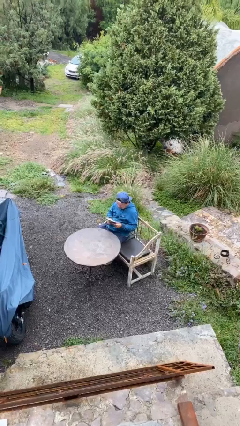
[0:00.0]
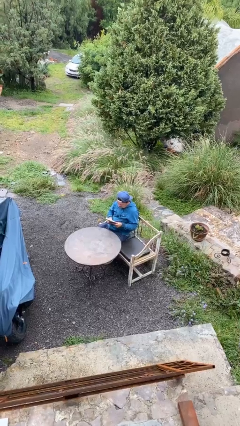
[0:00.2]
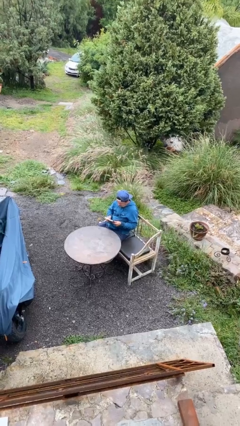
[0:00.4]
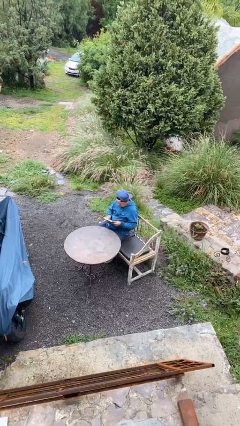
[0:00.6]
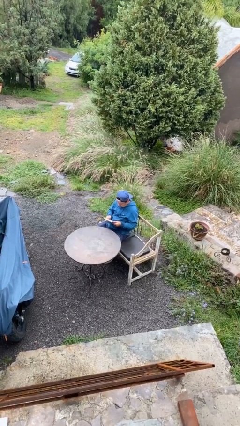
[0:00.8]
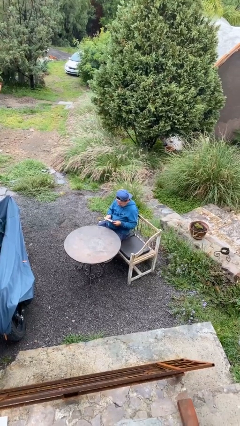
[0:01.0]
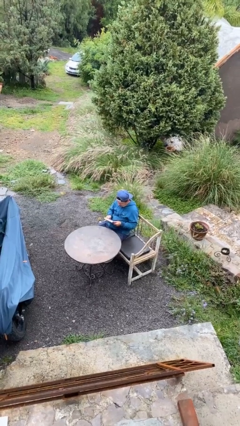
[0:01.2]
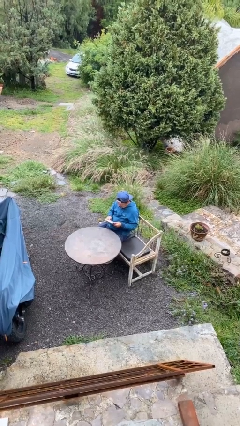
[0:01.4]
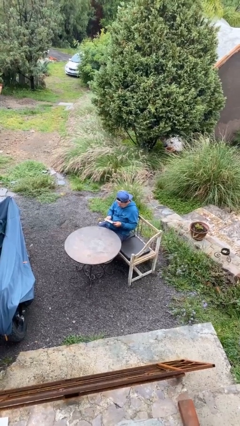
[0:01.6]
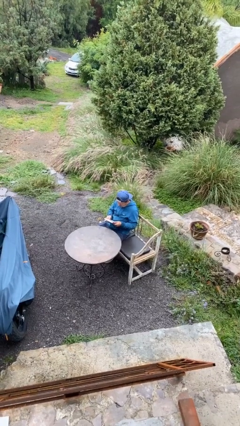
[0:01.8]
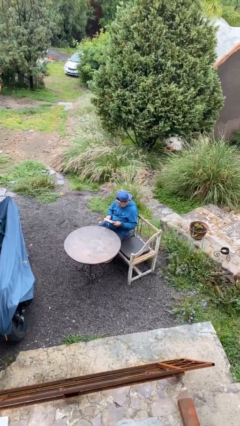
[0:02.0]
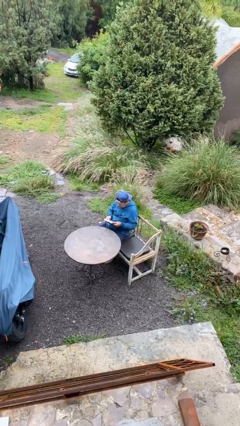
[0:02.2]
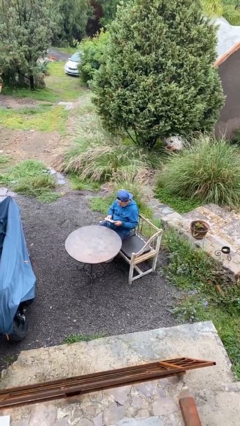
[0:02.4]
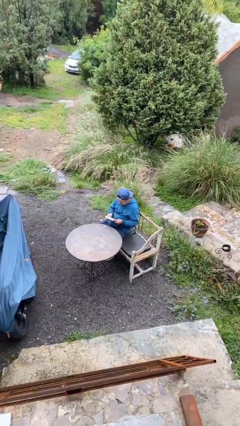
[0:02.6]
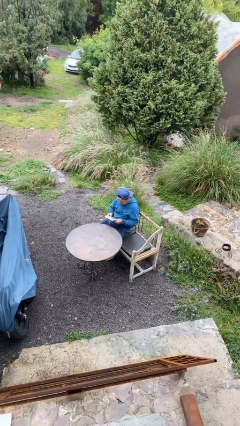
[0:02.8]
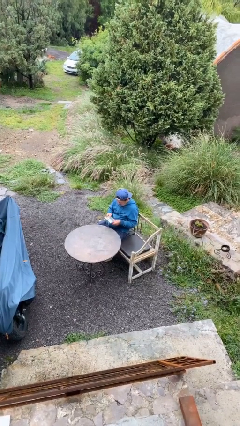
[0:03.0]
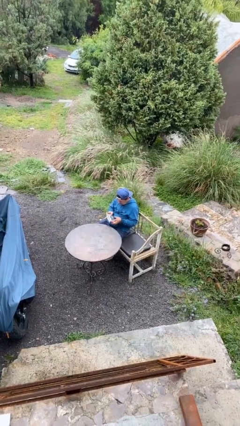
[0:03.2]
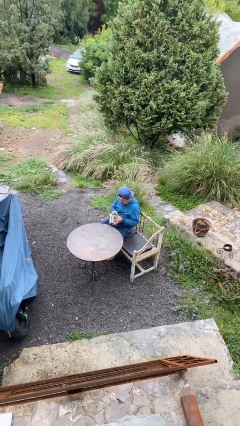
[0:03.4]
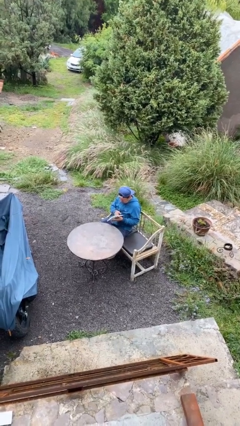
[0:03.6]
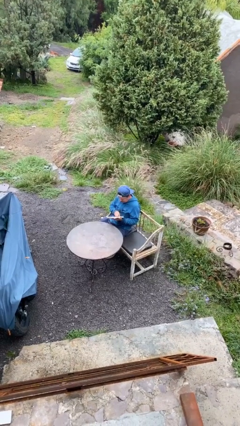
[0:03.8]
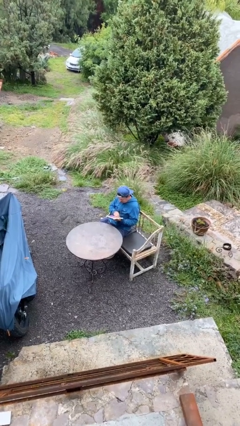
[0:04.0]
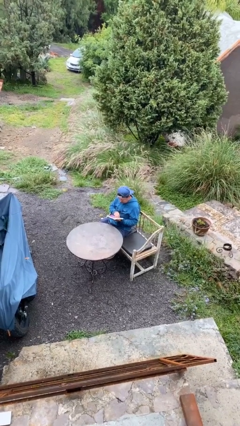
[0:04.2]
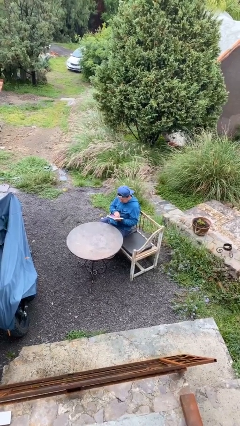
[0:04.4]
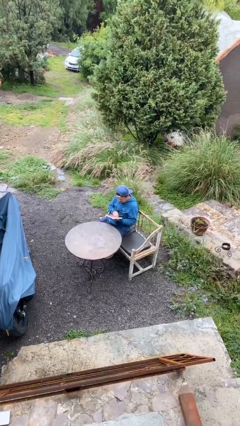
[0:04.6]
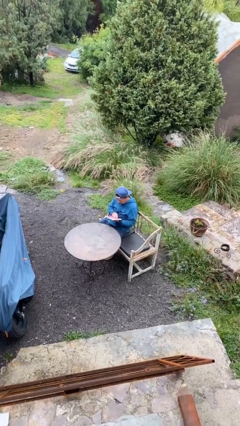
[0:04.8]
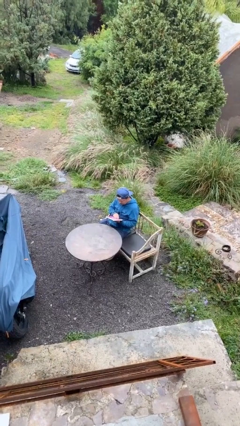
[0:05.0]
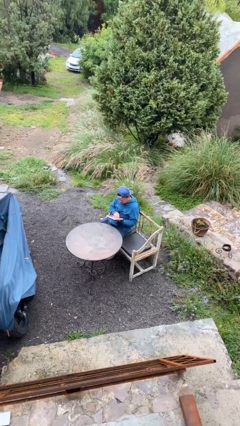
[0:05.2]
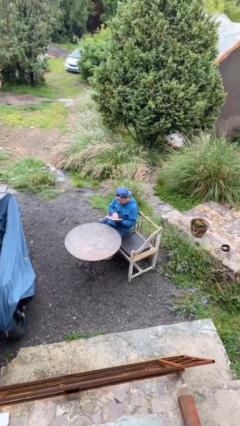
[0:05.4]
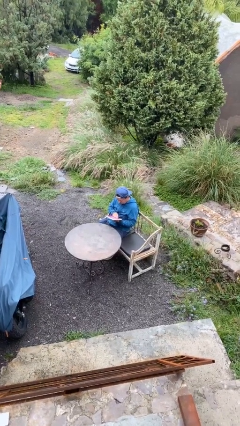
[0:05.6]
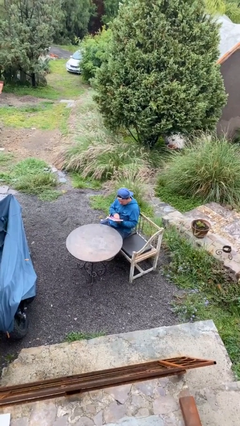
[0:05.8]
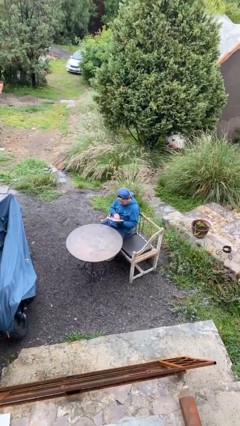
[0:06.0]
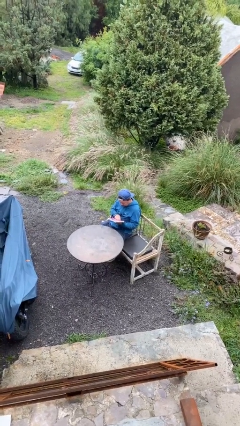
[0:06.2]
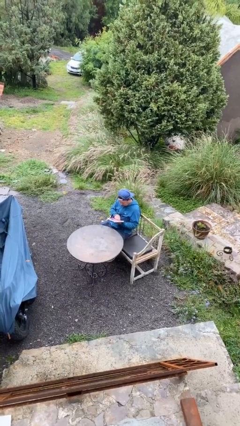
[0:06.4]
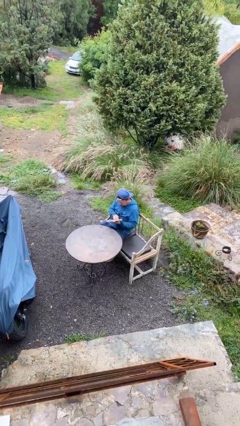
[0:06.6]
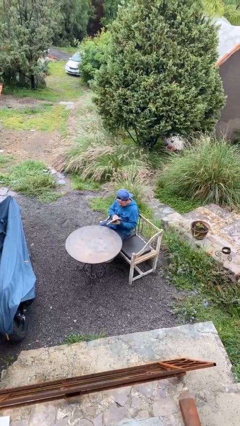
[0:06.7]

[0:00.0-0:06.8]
person reads document

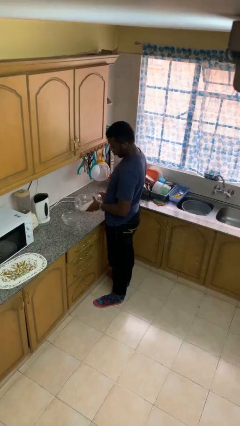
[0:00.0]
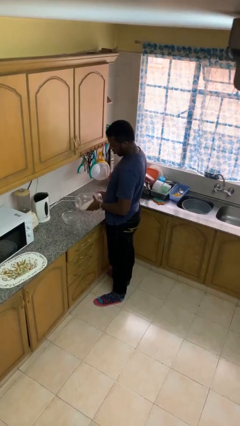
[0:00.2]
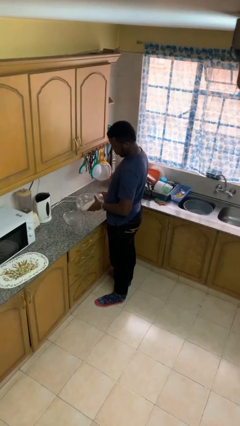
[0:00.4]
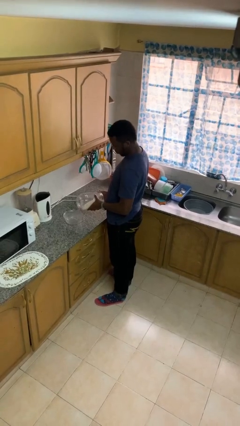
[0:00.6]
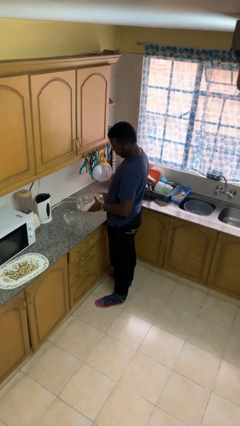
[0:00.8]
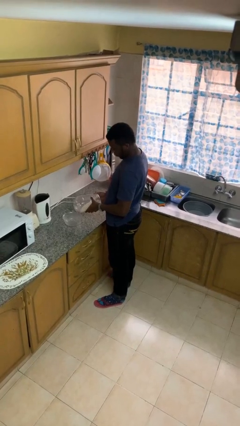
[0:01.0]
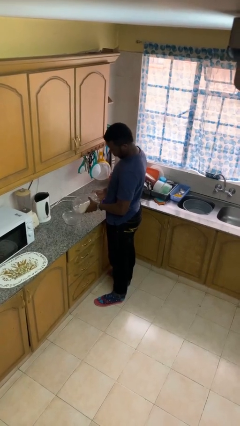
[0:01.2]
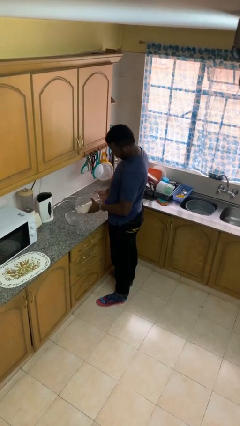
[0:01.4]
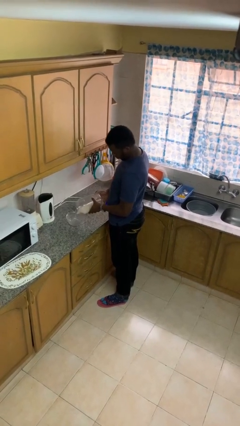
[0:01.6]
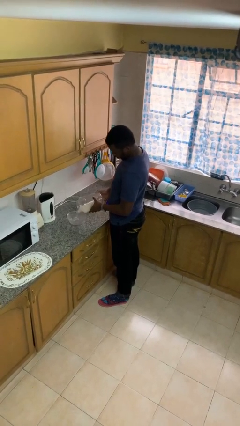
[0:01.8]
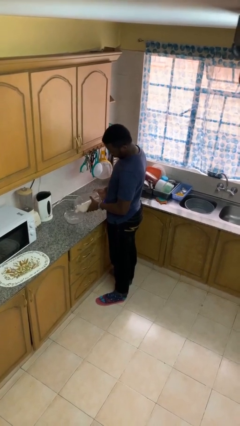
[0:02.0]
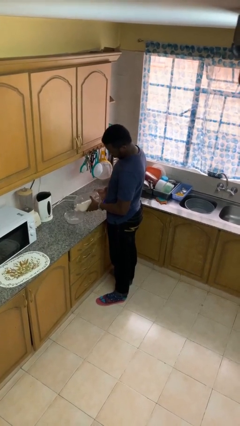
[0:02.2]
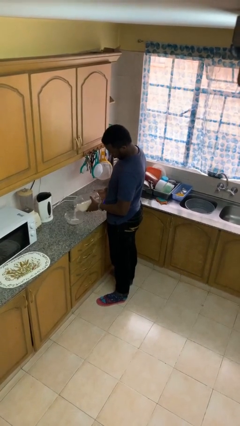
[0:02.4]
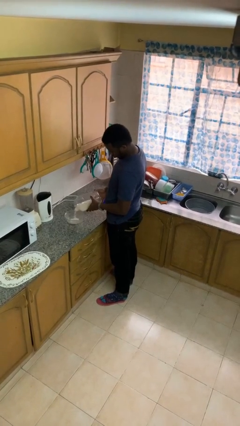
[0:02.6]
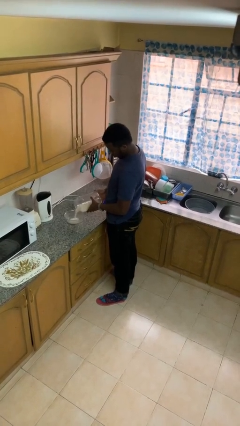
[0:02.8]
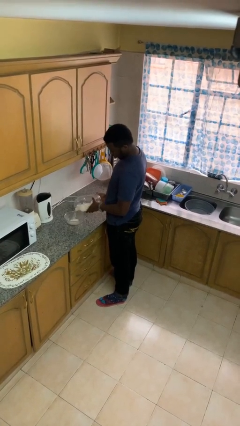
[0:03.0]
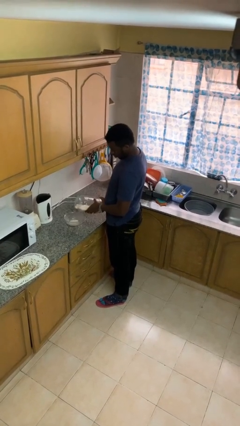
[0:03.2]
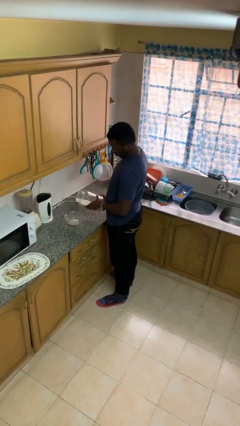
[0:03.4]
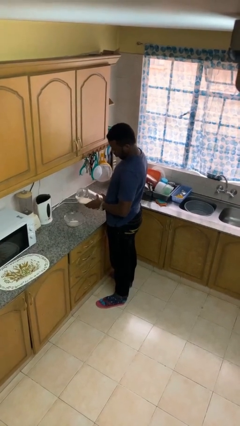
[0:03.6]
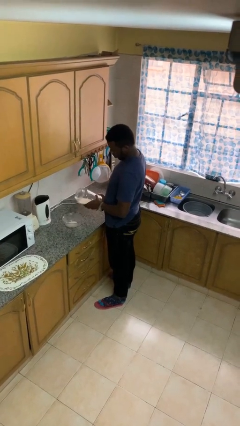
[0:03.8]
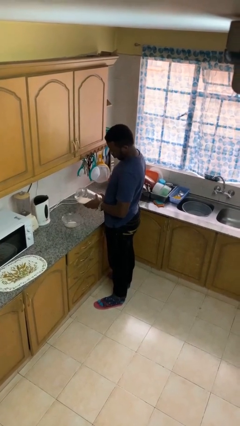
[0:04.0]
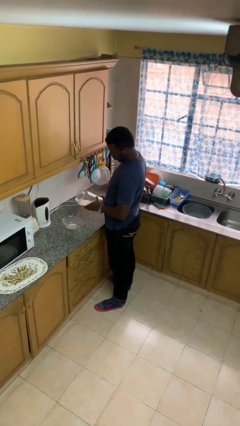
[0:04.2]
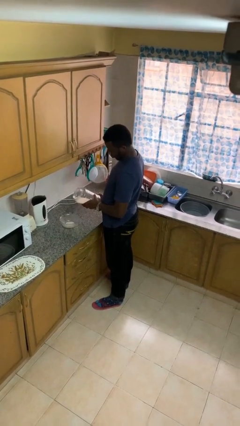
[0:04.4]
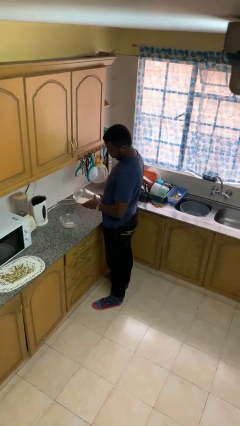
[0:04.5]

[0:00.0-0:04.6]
person pours into bowl

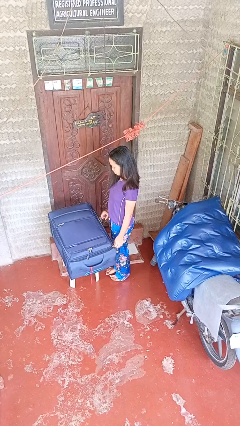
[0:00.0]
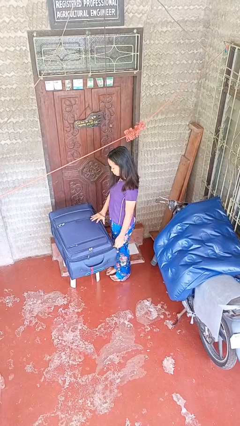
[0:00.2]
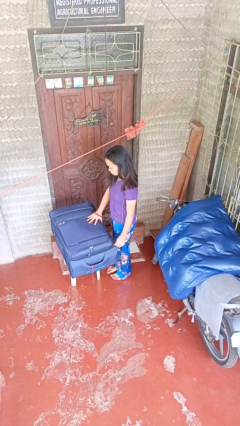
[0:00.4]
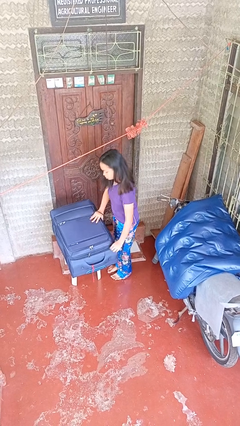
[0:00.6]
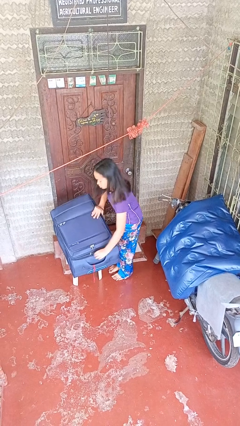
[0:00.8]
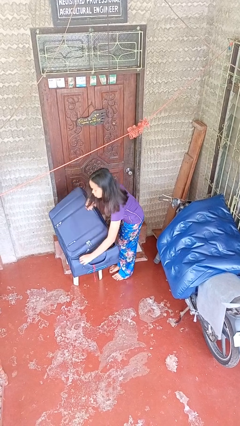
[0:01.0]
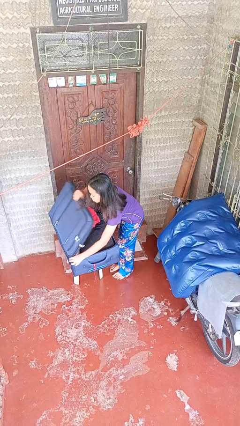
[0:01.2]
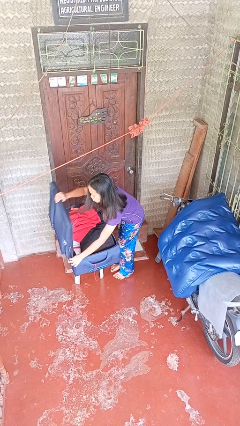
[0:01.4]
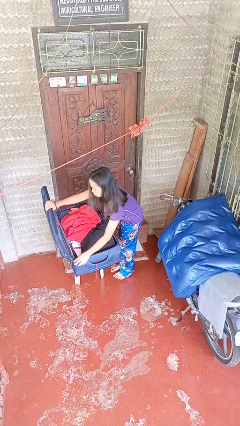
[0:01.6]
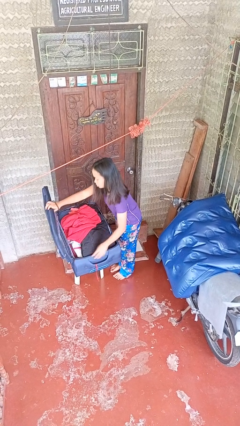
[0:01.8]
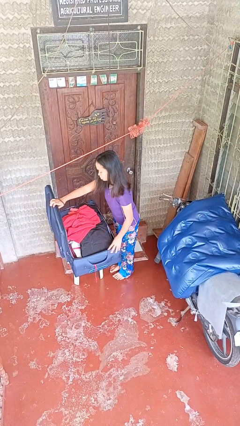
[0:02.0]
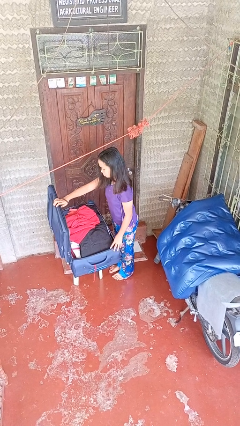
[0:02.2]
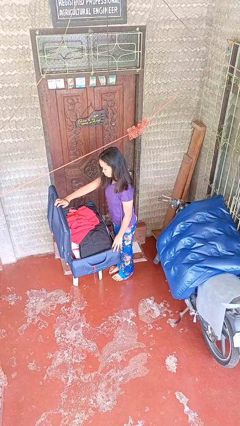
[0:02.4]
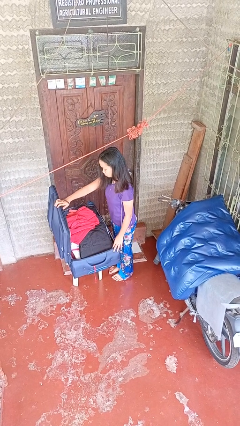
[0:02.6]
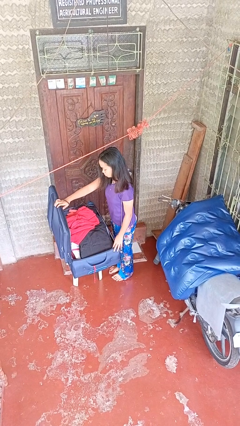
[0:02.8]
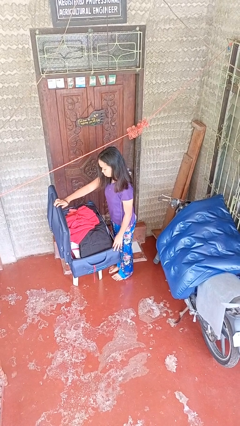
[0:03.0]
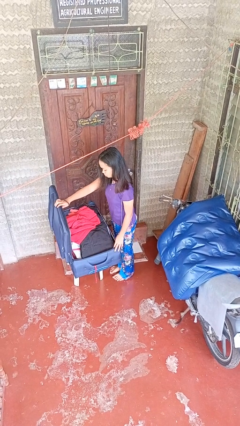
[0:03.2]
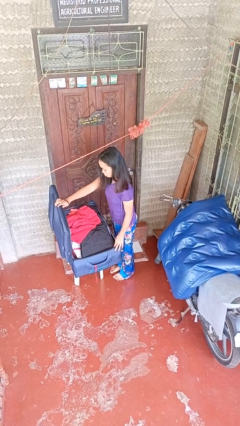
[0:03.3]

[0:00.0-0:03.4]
person opens suitcase

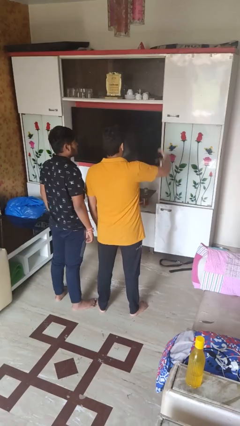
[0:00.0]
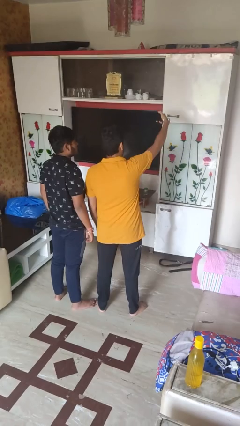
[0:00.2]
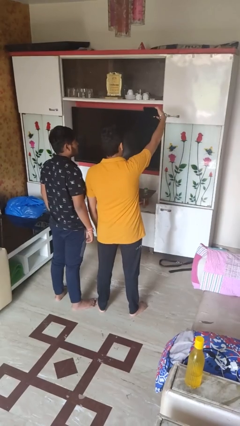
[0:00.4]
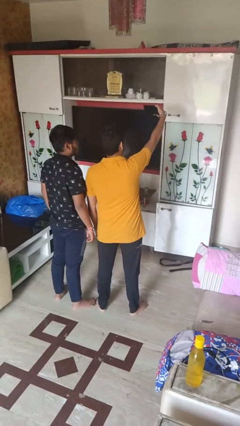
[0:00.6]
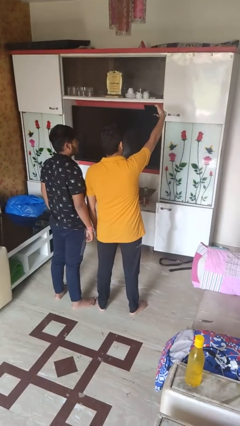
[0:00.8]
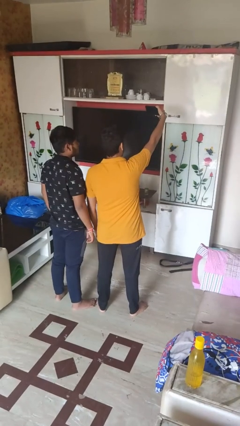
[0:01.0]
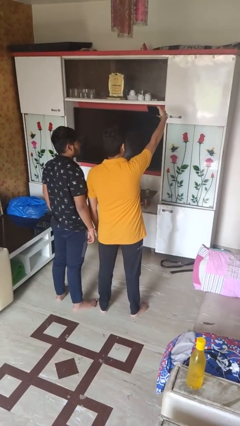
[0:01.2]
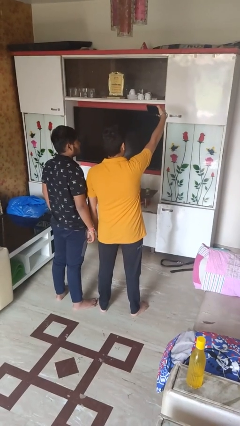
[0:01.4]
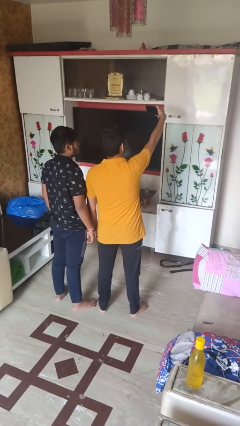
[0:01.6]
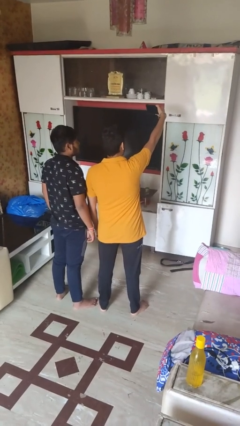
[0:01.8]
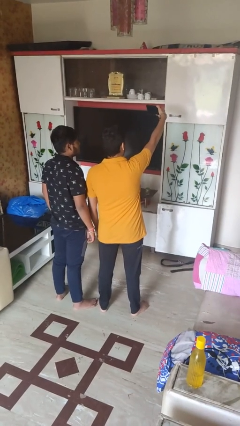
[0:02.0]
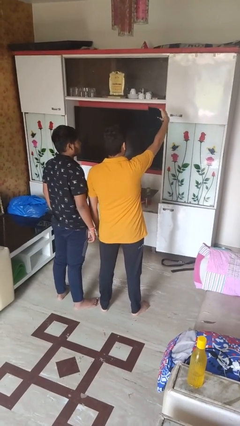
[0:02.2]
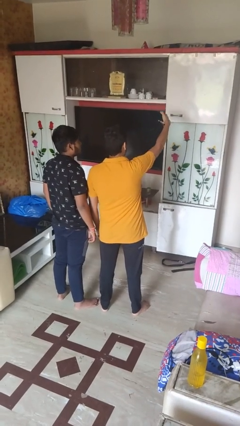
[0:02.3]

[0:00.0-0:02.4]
person takes selfie with person

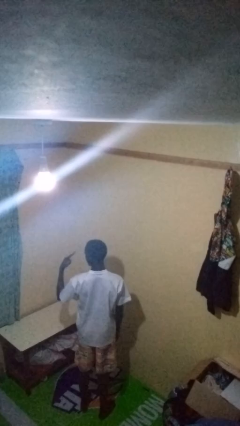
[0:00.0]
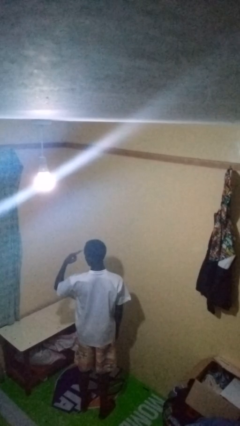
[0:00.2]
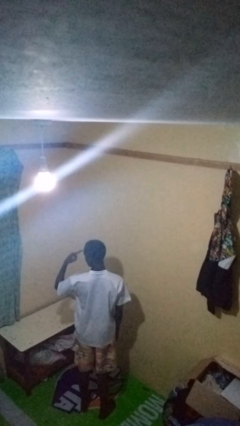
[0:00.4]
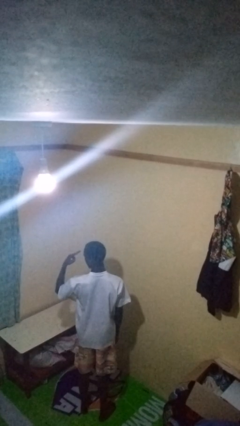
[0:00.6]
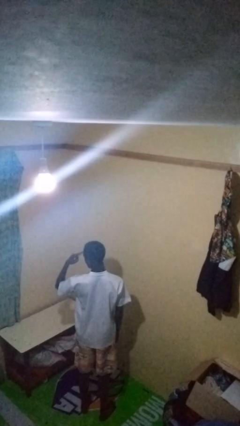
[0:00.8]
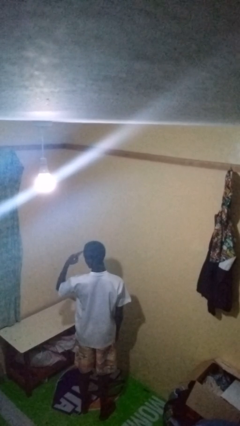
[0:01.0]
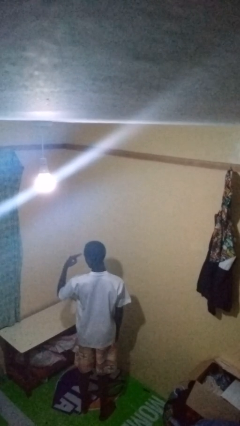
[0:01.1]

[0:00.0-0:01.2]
person gestures watch closely
